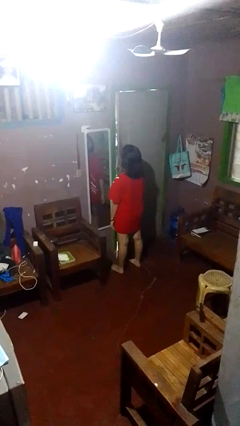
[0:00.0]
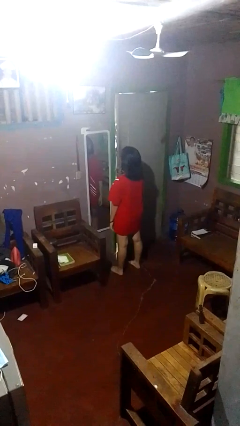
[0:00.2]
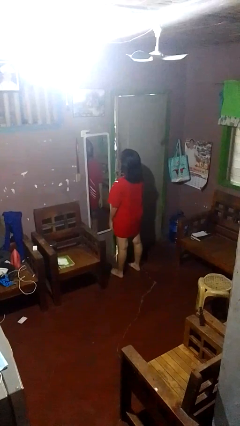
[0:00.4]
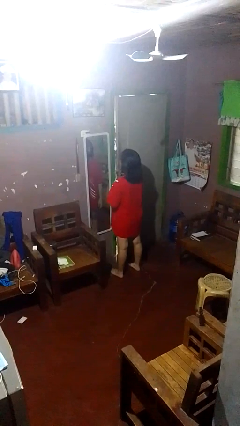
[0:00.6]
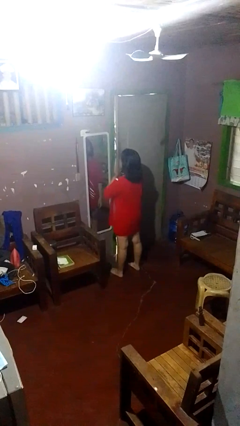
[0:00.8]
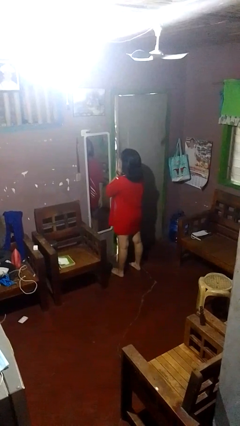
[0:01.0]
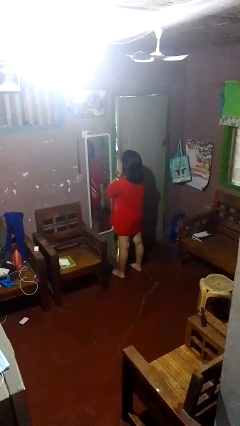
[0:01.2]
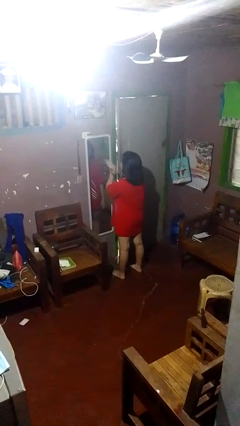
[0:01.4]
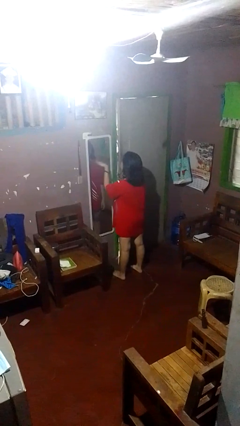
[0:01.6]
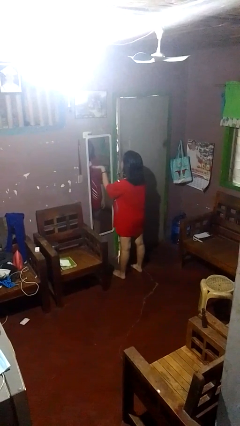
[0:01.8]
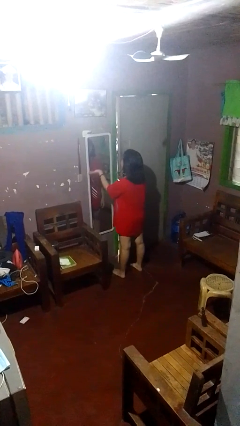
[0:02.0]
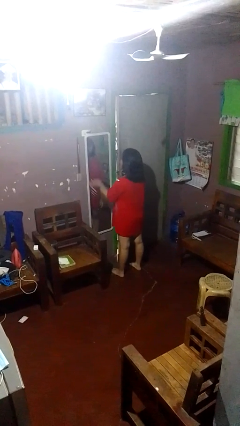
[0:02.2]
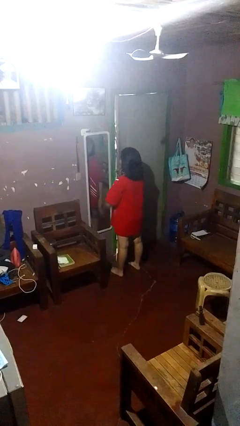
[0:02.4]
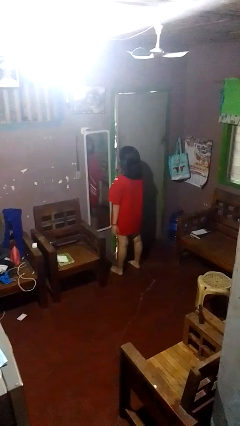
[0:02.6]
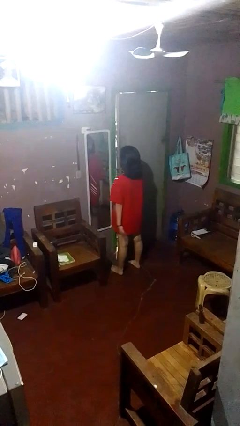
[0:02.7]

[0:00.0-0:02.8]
person gestures blow kiss

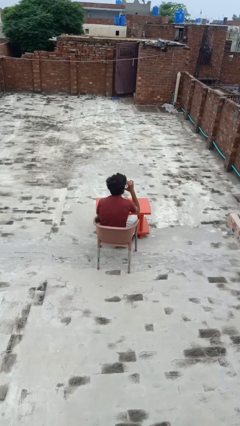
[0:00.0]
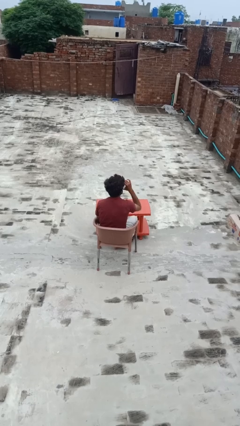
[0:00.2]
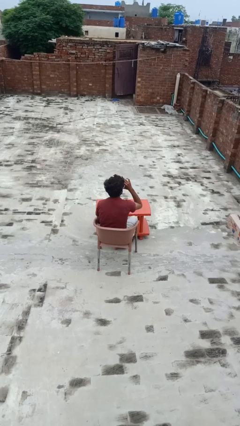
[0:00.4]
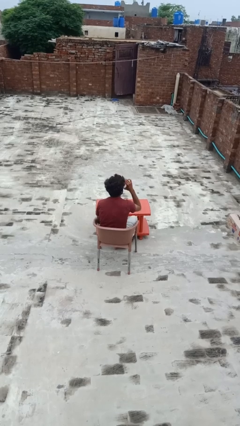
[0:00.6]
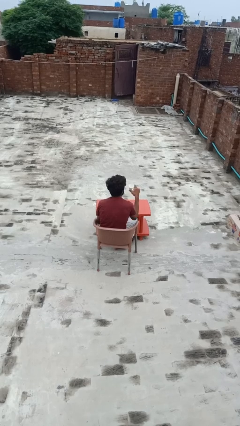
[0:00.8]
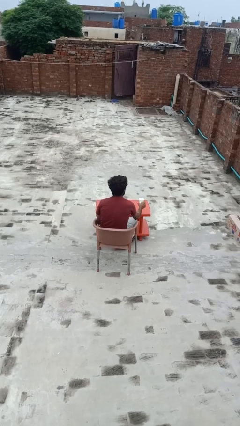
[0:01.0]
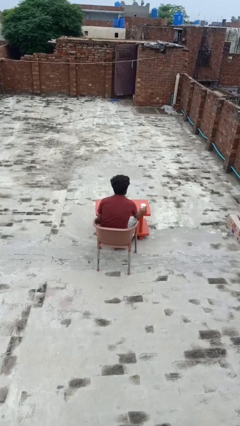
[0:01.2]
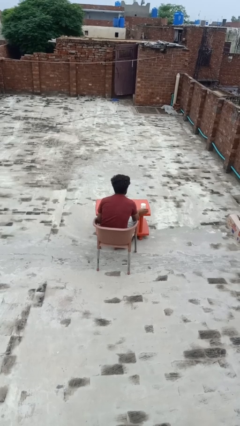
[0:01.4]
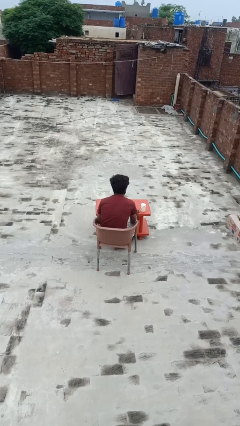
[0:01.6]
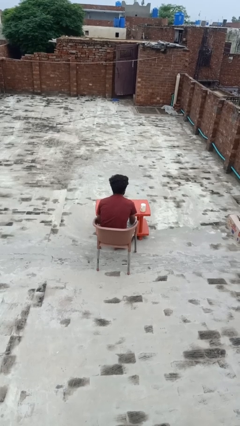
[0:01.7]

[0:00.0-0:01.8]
person drinks from mug

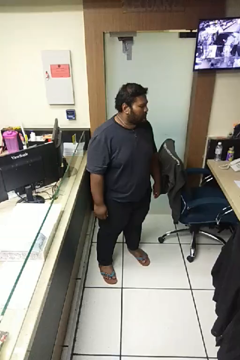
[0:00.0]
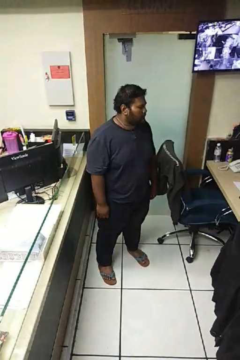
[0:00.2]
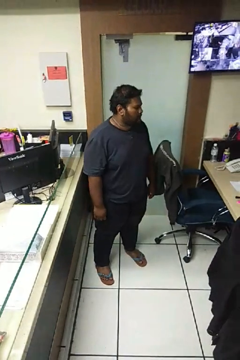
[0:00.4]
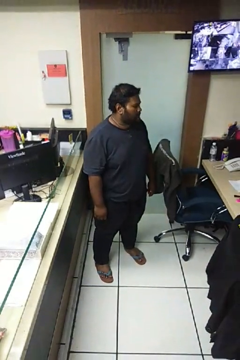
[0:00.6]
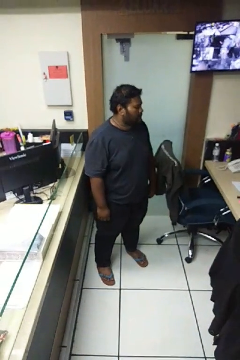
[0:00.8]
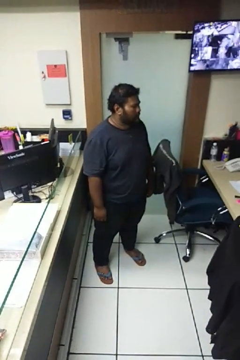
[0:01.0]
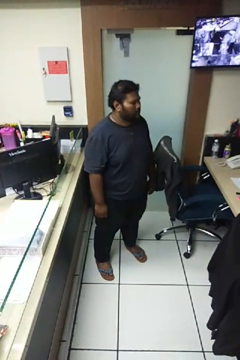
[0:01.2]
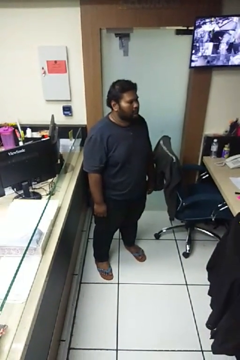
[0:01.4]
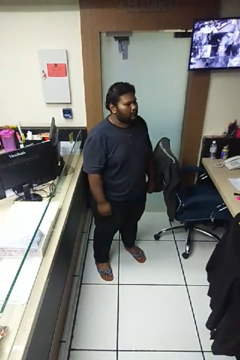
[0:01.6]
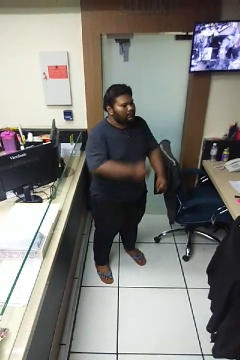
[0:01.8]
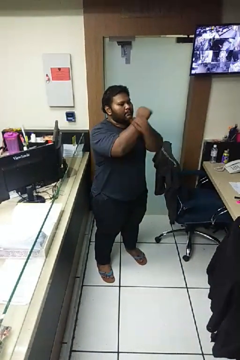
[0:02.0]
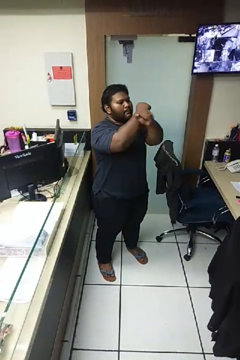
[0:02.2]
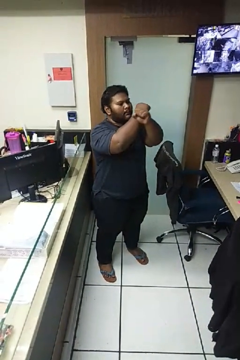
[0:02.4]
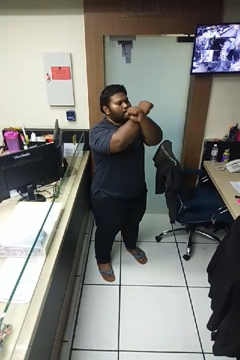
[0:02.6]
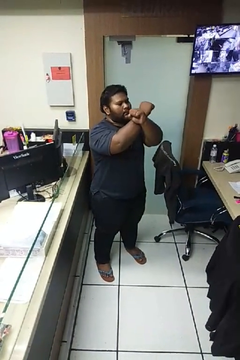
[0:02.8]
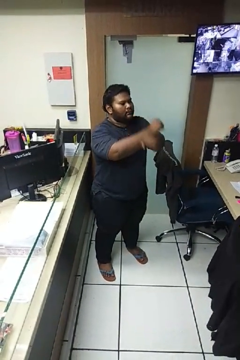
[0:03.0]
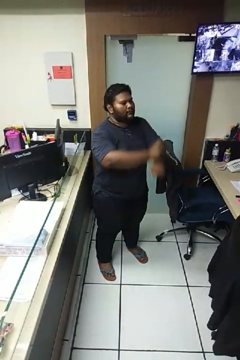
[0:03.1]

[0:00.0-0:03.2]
person gestures arms x

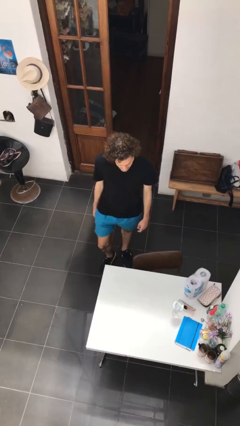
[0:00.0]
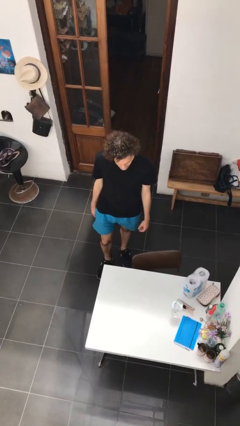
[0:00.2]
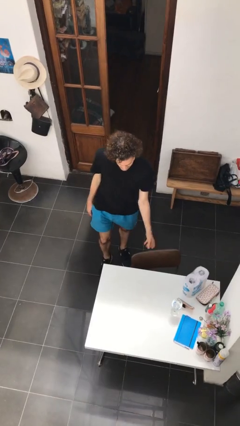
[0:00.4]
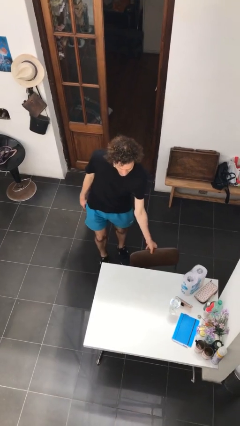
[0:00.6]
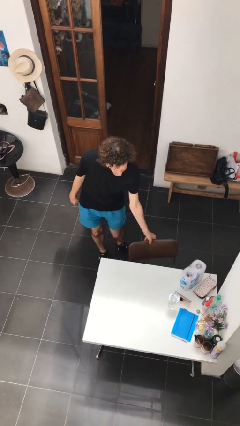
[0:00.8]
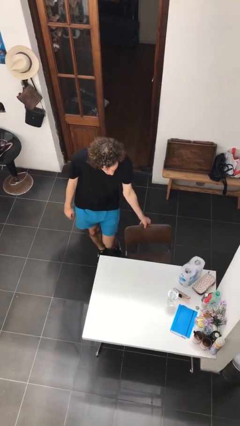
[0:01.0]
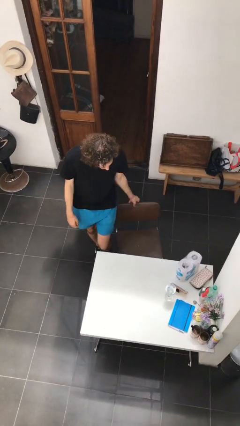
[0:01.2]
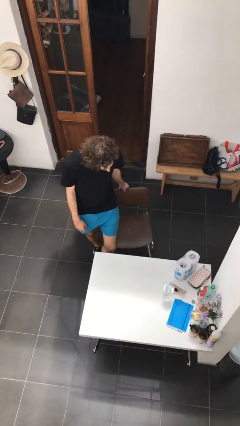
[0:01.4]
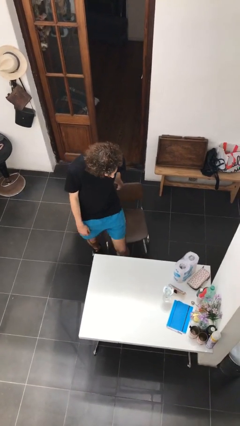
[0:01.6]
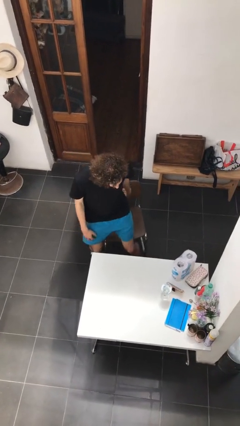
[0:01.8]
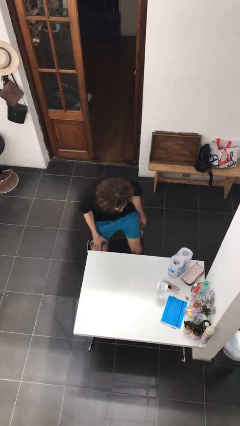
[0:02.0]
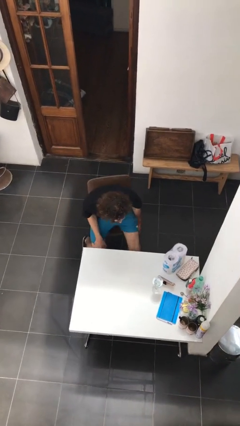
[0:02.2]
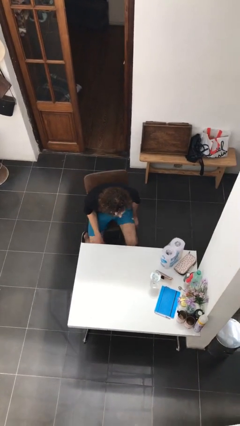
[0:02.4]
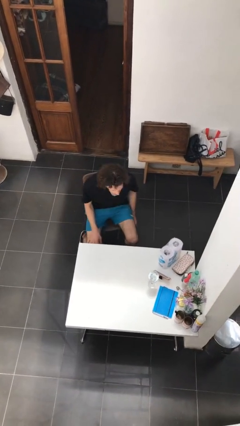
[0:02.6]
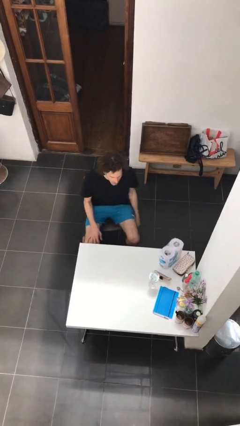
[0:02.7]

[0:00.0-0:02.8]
person sits down

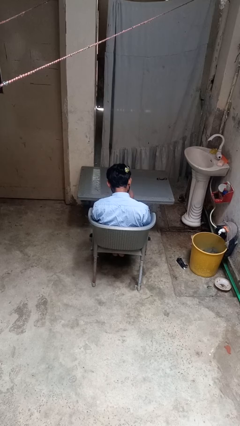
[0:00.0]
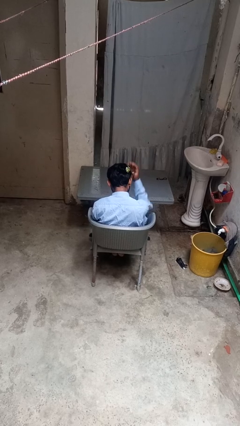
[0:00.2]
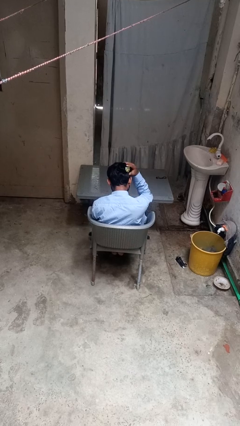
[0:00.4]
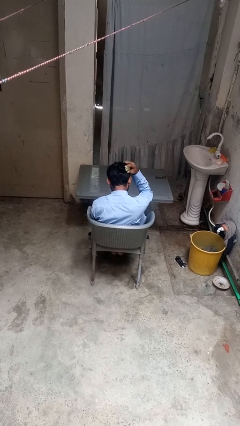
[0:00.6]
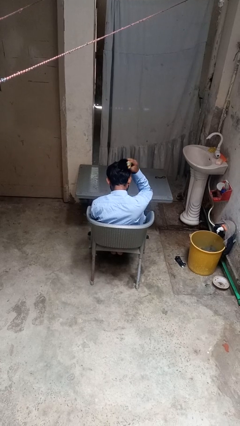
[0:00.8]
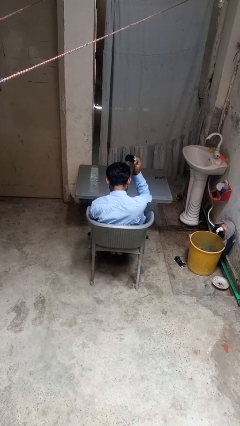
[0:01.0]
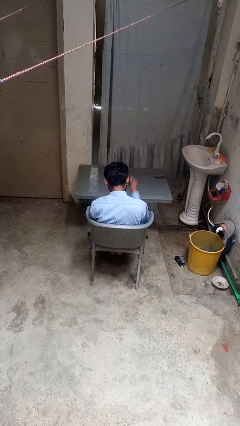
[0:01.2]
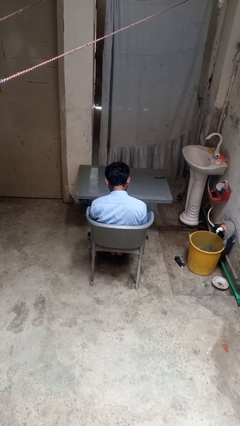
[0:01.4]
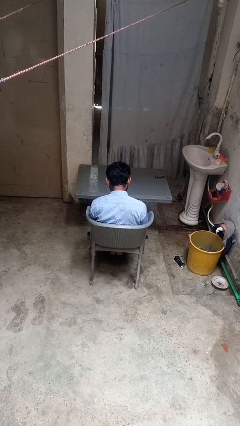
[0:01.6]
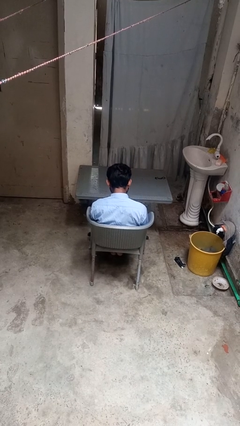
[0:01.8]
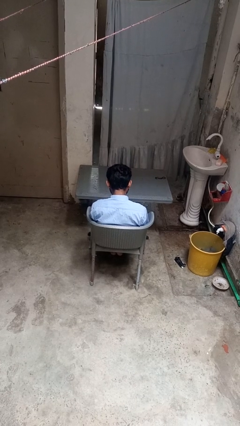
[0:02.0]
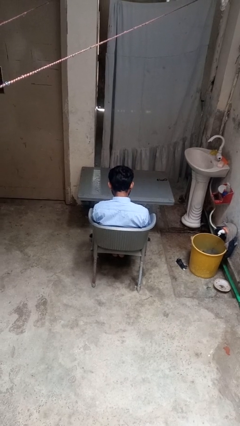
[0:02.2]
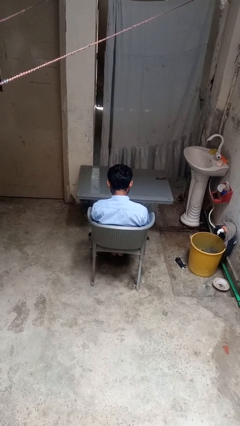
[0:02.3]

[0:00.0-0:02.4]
person takes off hairtie

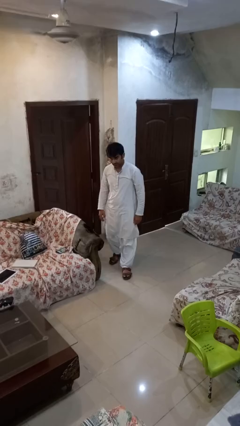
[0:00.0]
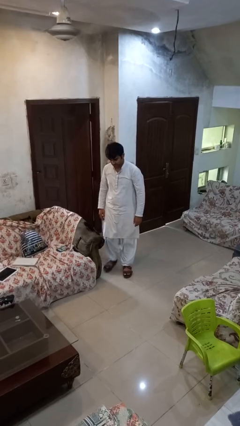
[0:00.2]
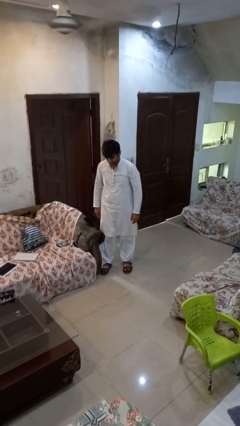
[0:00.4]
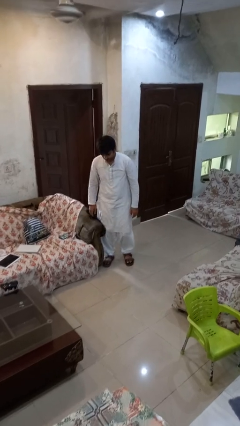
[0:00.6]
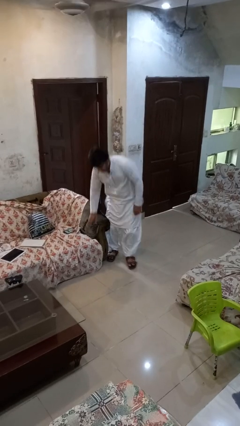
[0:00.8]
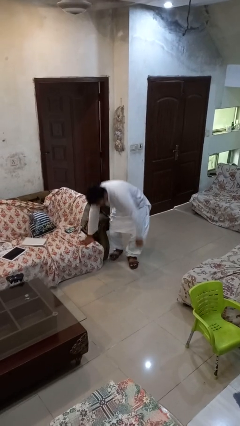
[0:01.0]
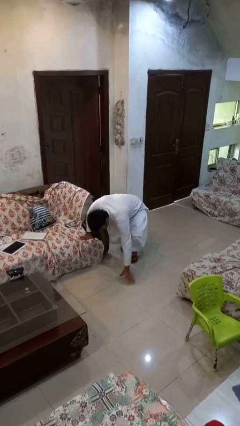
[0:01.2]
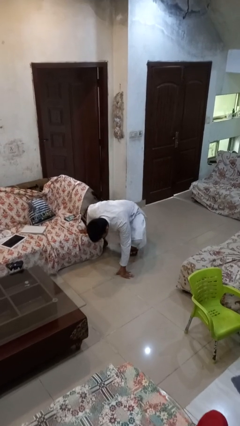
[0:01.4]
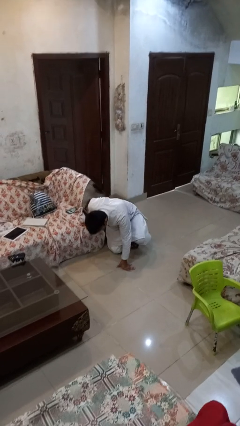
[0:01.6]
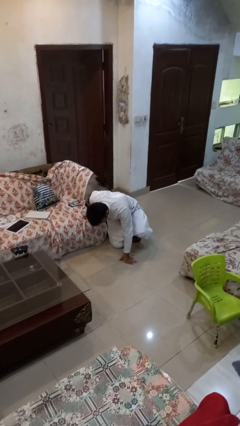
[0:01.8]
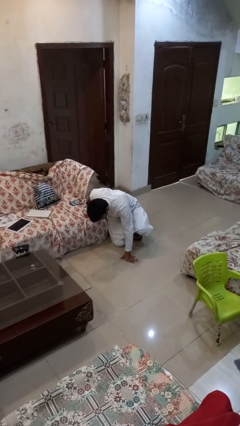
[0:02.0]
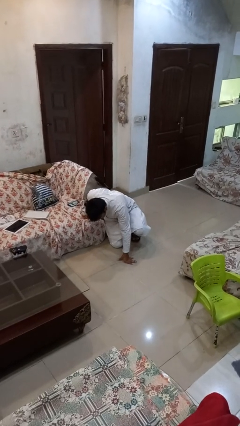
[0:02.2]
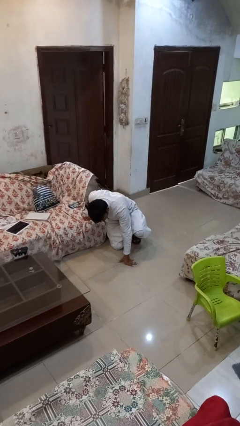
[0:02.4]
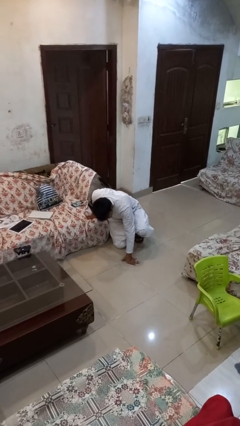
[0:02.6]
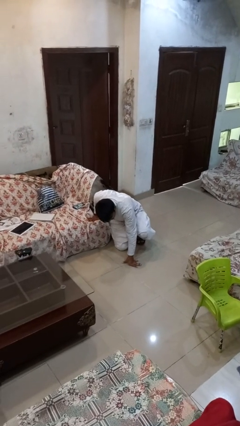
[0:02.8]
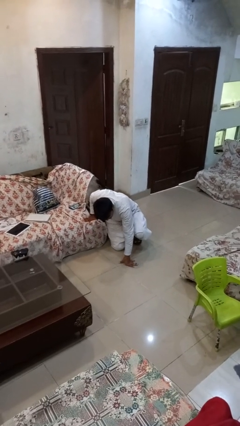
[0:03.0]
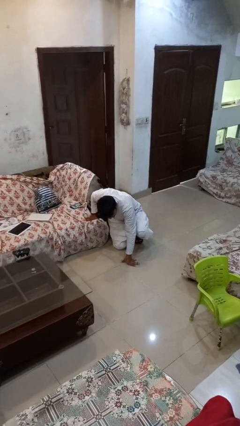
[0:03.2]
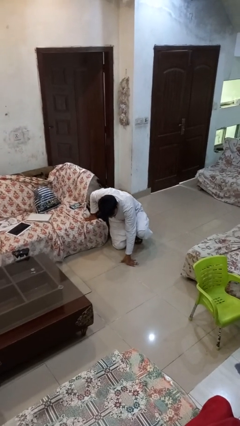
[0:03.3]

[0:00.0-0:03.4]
person trips on object on floor

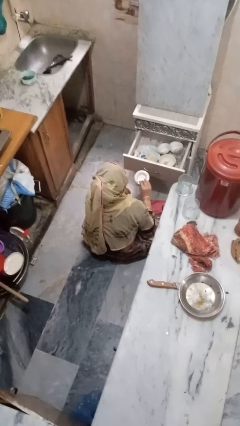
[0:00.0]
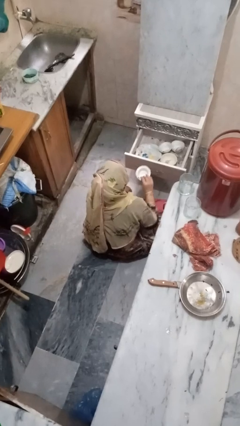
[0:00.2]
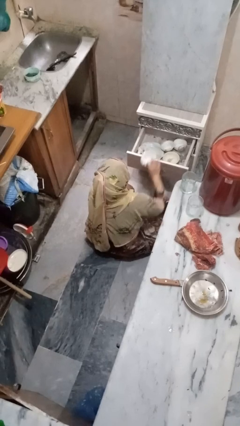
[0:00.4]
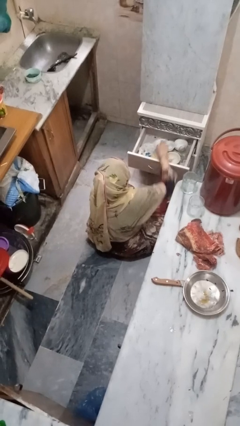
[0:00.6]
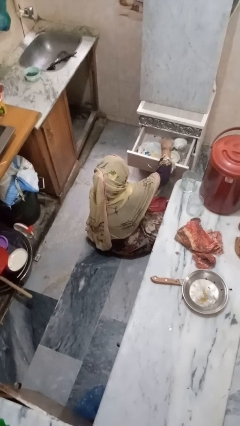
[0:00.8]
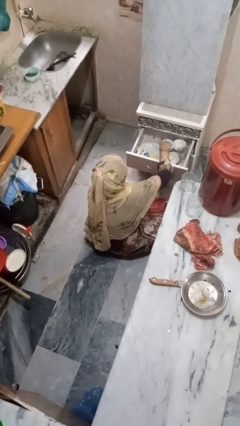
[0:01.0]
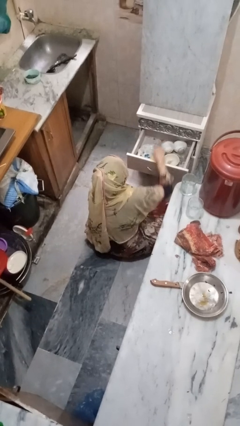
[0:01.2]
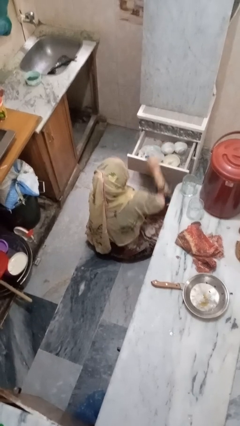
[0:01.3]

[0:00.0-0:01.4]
person puts object into kitchen drawer
